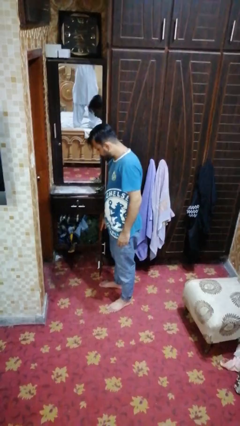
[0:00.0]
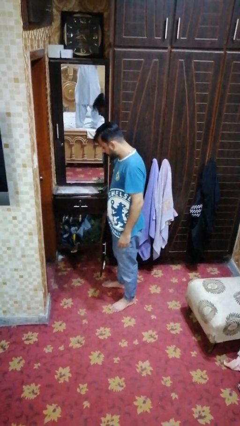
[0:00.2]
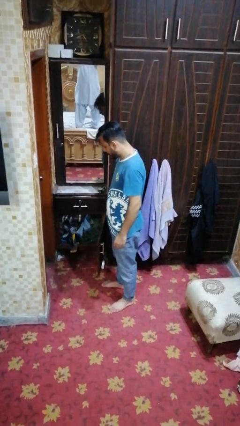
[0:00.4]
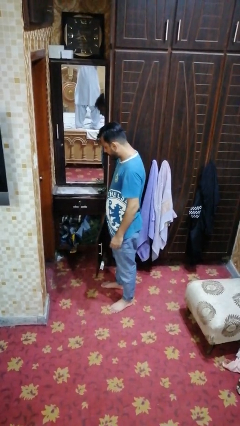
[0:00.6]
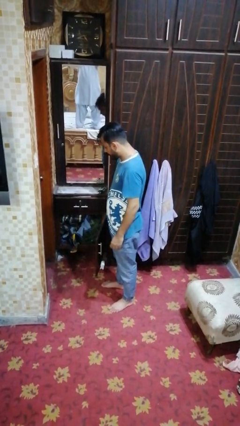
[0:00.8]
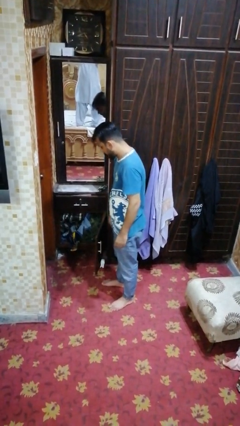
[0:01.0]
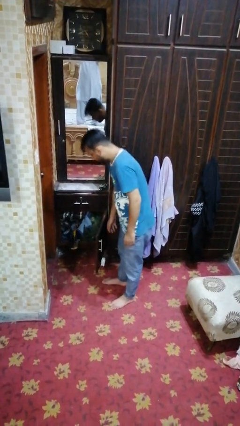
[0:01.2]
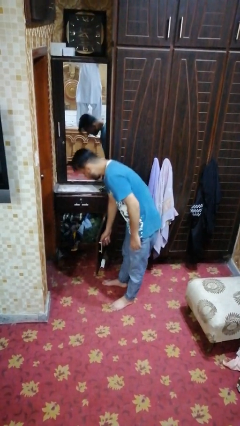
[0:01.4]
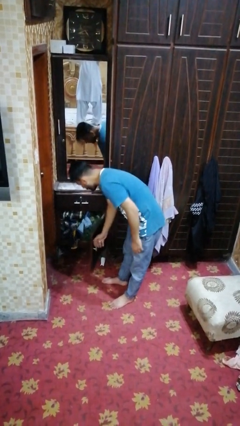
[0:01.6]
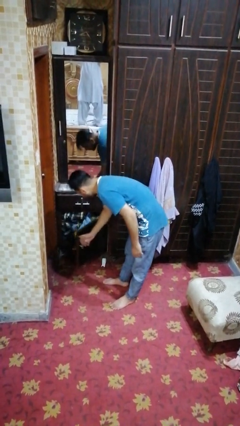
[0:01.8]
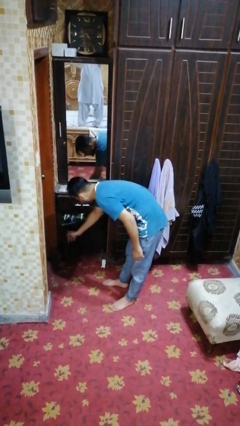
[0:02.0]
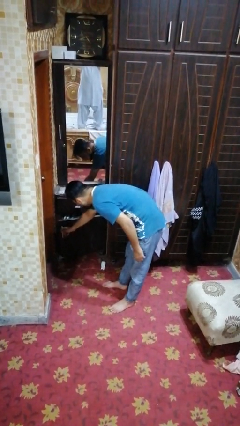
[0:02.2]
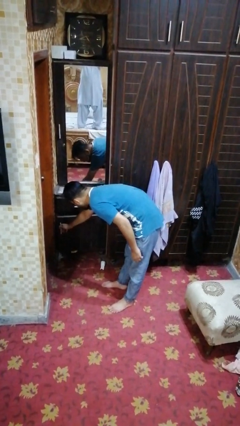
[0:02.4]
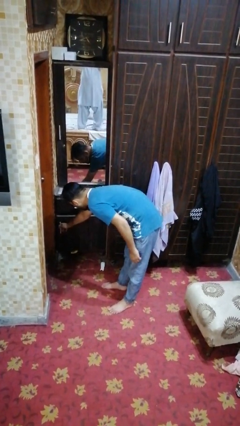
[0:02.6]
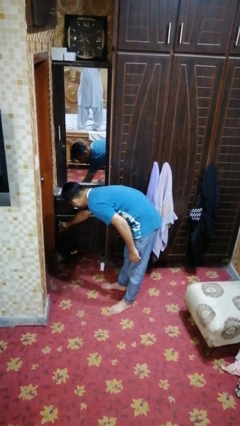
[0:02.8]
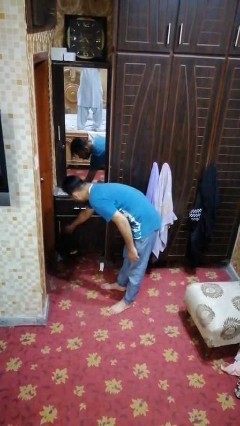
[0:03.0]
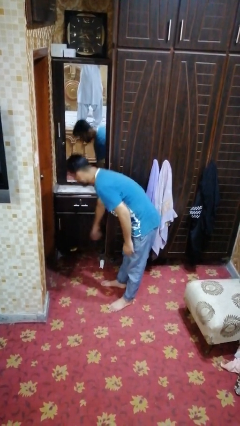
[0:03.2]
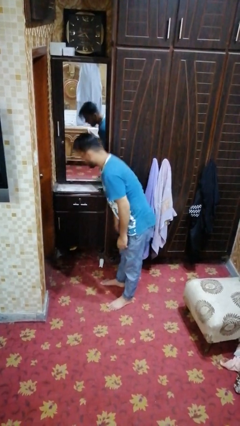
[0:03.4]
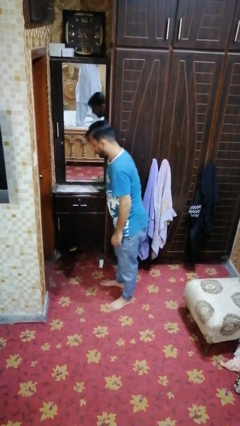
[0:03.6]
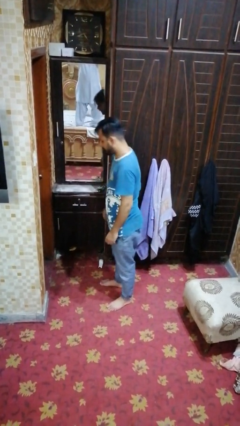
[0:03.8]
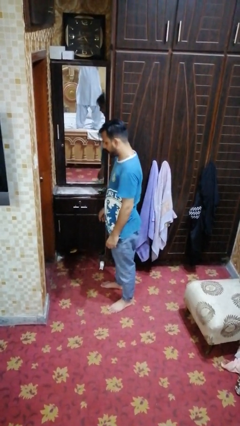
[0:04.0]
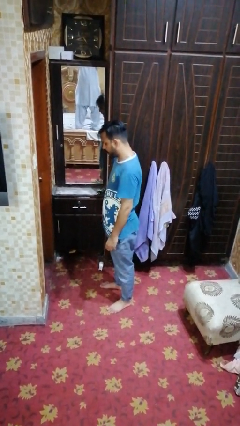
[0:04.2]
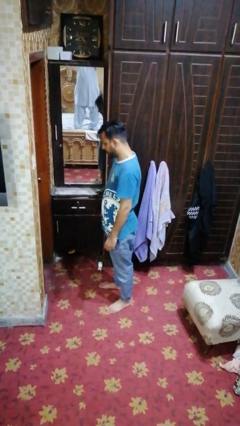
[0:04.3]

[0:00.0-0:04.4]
person closes dresser drawer

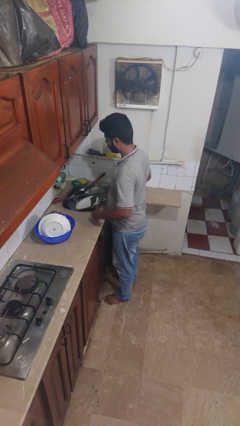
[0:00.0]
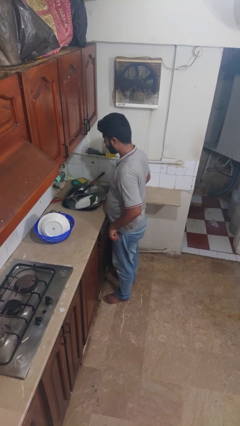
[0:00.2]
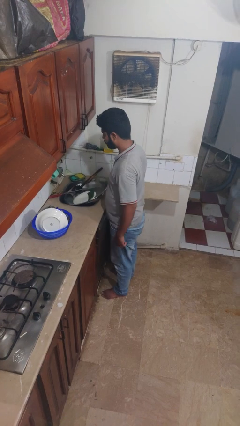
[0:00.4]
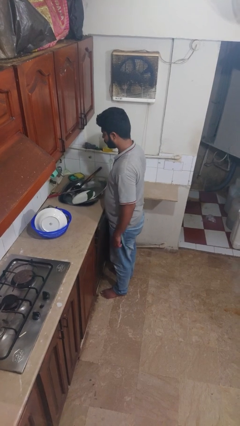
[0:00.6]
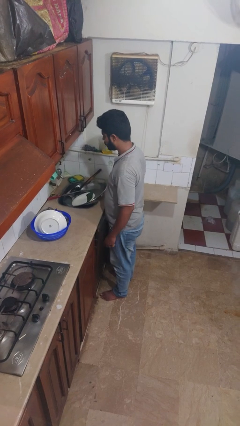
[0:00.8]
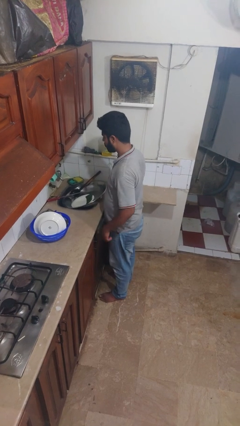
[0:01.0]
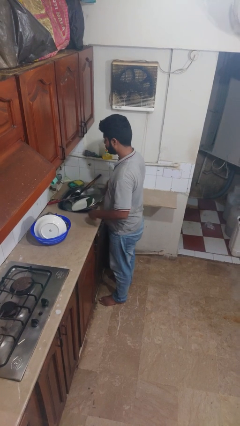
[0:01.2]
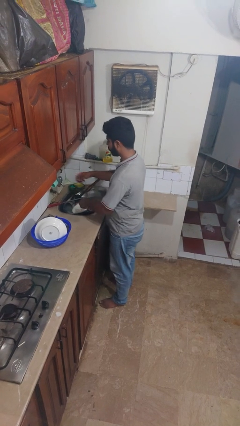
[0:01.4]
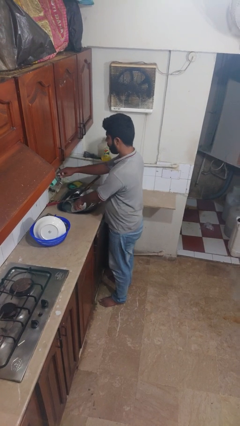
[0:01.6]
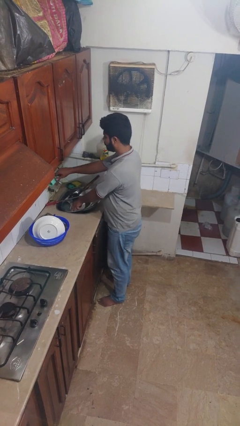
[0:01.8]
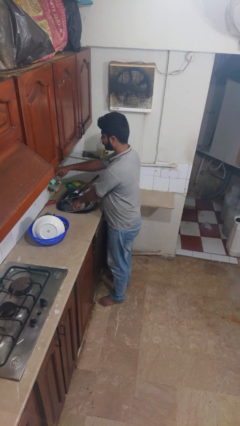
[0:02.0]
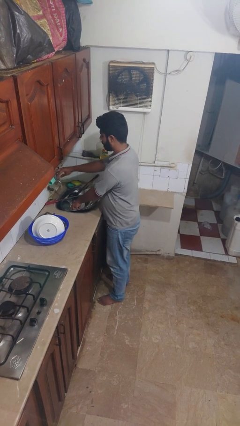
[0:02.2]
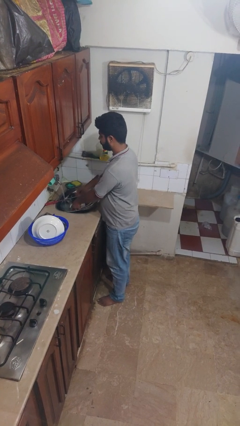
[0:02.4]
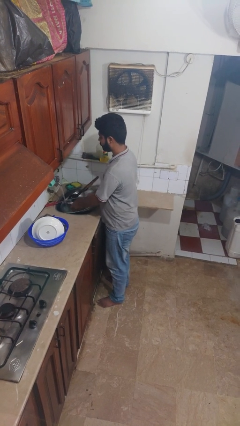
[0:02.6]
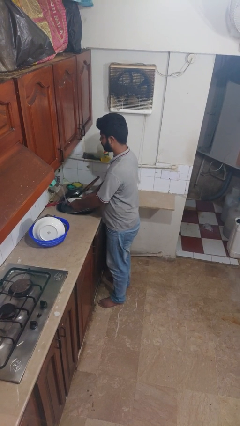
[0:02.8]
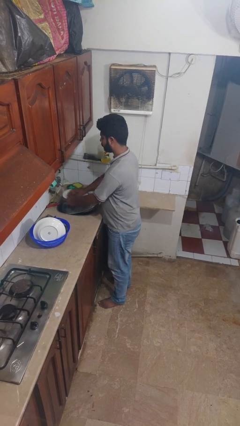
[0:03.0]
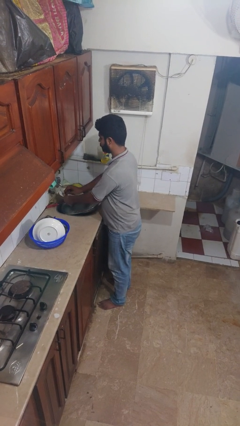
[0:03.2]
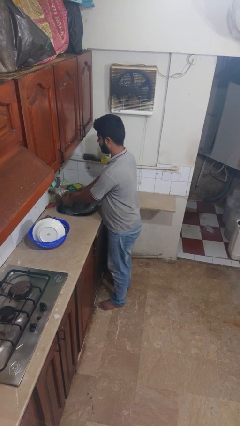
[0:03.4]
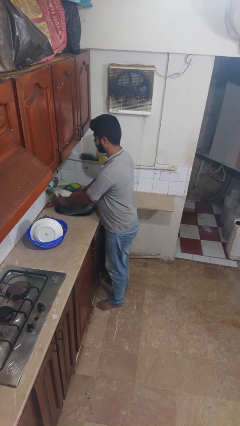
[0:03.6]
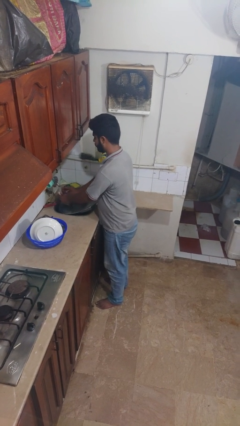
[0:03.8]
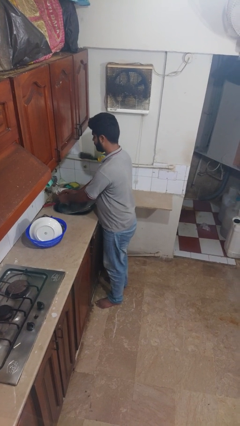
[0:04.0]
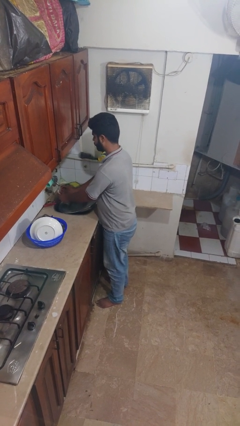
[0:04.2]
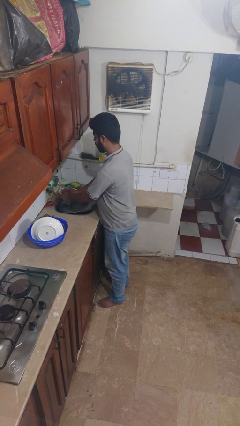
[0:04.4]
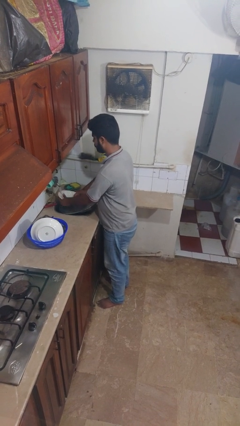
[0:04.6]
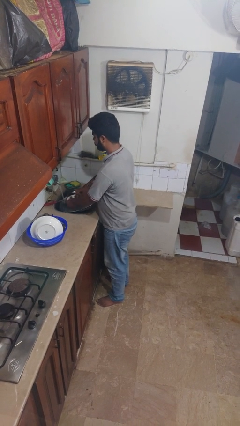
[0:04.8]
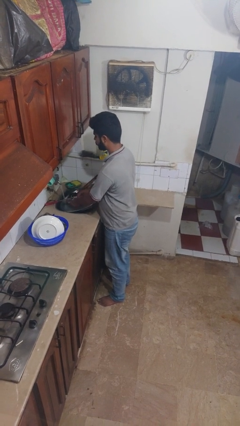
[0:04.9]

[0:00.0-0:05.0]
person washes dish

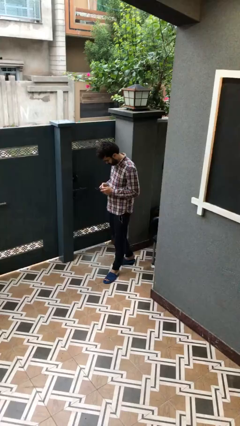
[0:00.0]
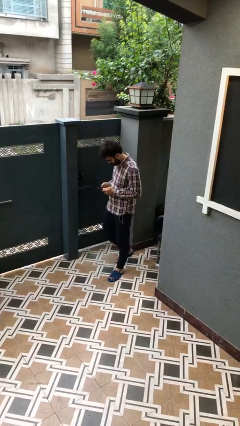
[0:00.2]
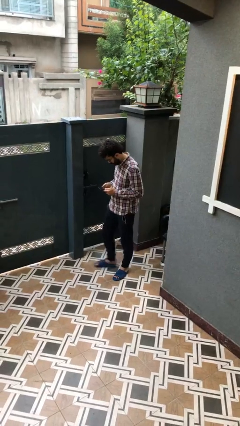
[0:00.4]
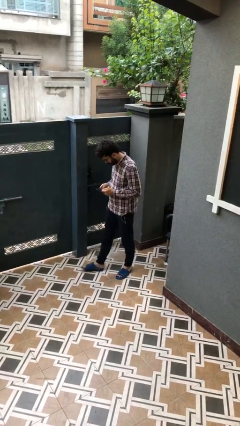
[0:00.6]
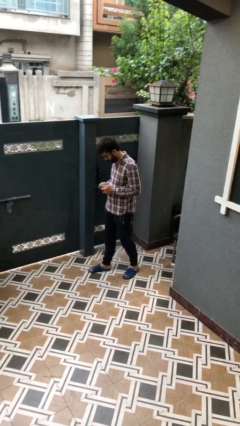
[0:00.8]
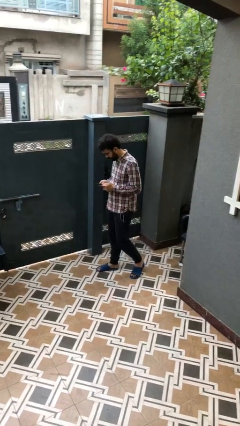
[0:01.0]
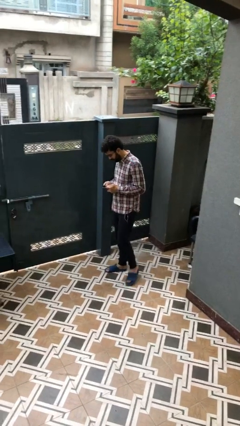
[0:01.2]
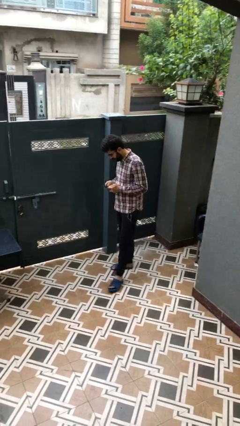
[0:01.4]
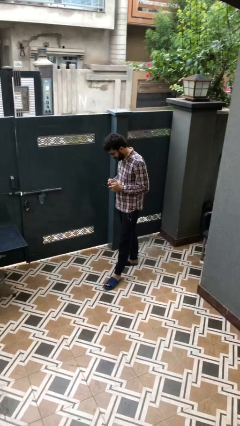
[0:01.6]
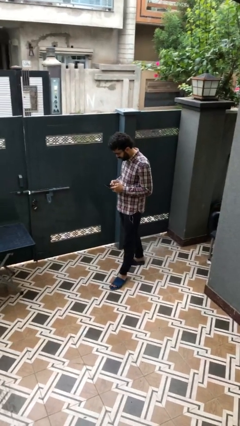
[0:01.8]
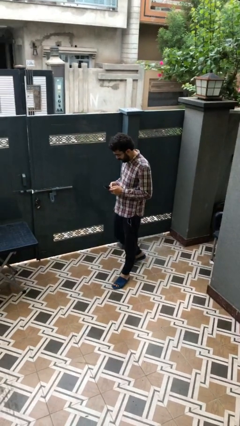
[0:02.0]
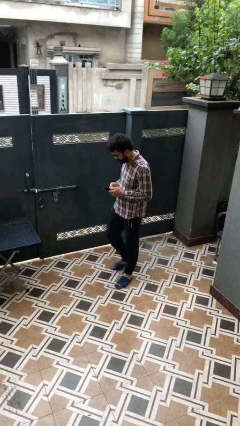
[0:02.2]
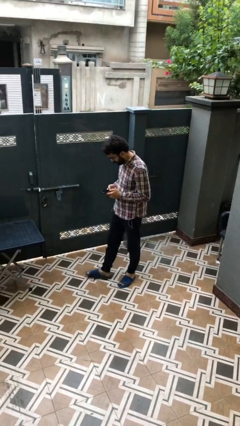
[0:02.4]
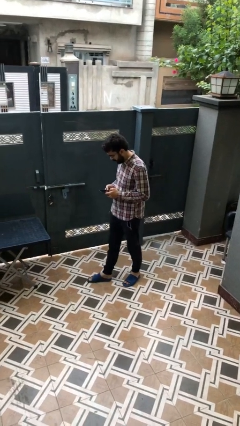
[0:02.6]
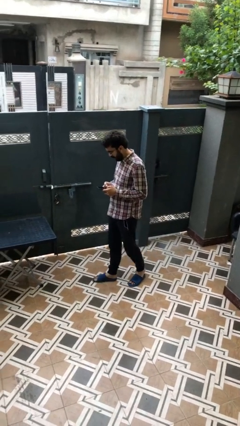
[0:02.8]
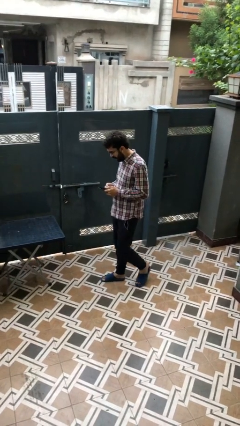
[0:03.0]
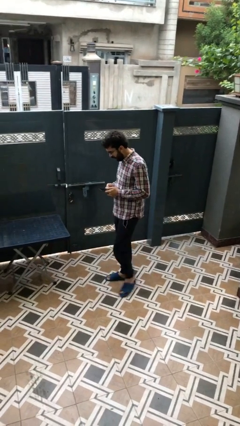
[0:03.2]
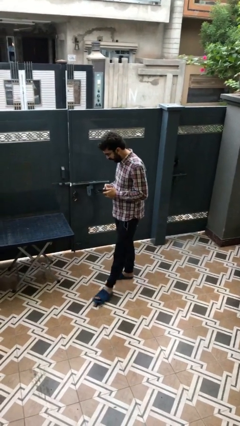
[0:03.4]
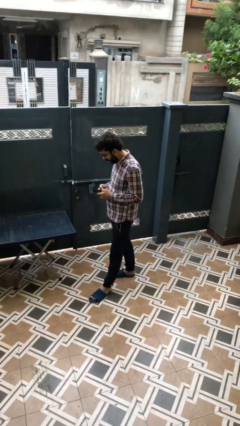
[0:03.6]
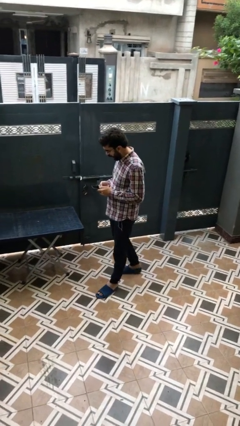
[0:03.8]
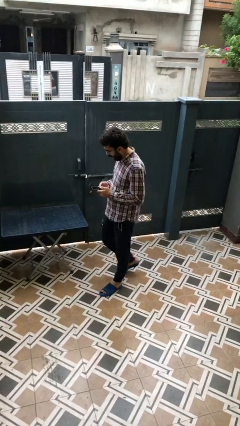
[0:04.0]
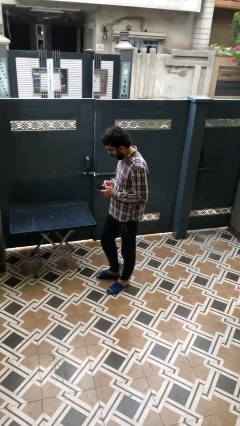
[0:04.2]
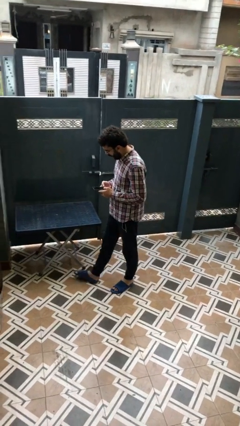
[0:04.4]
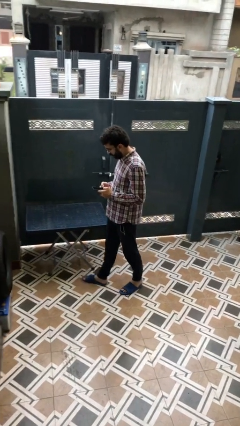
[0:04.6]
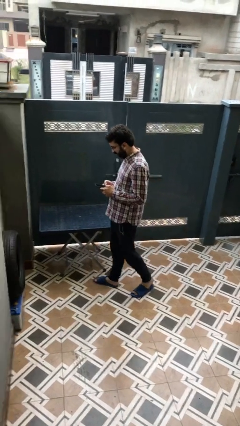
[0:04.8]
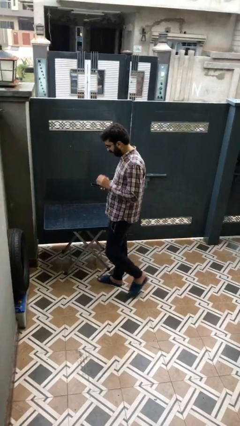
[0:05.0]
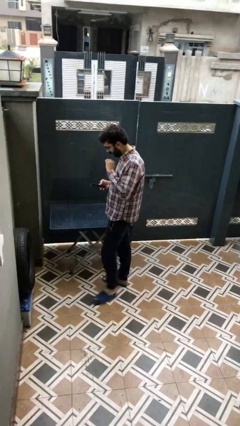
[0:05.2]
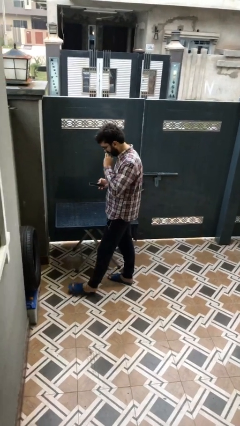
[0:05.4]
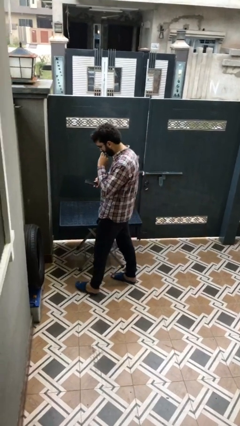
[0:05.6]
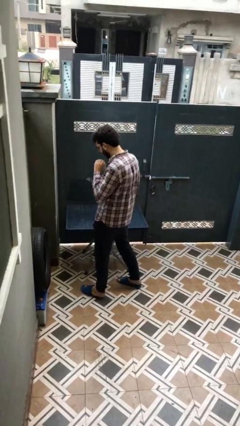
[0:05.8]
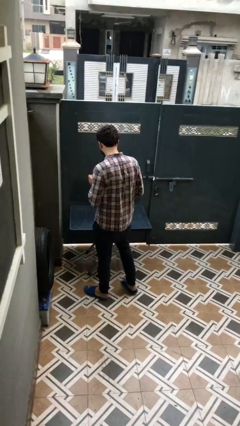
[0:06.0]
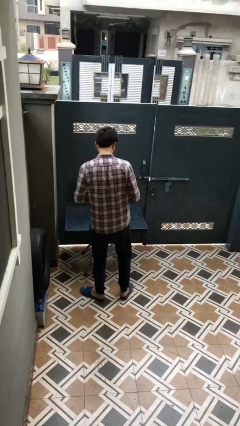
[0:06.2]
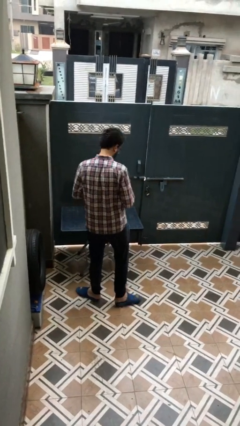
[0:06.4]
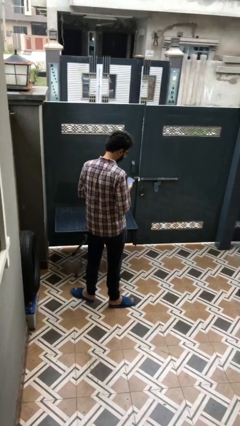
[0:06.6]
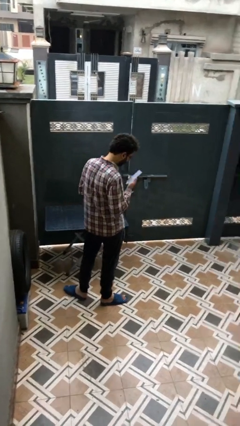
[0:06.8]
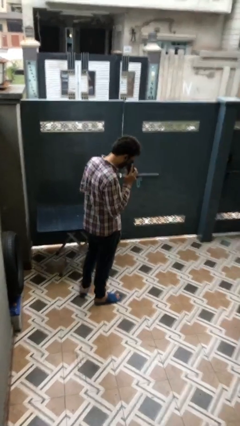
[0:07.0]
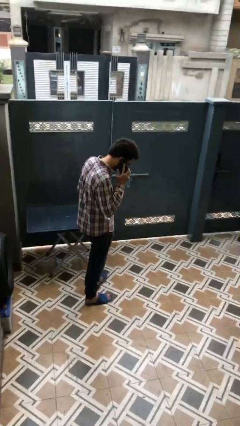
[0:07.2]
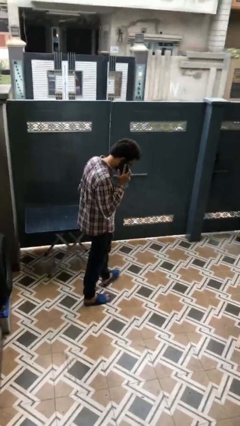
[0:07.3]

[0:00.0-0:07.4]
person texts on phone

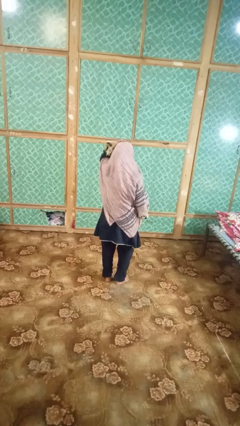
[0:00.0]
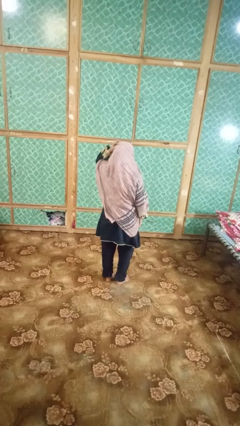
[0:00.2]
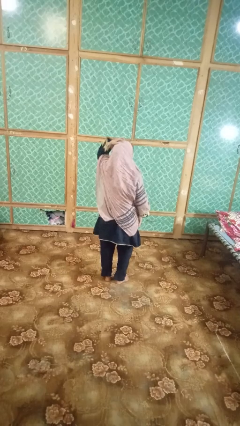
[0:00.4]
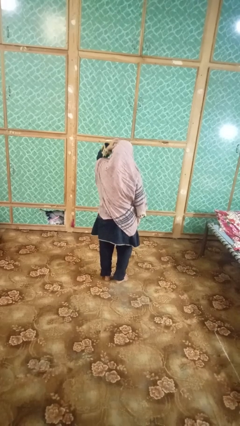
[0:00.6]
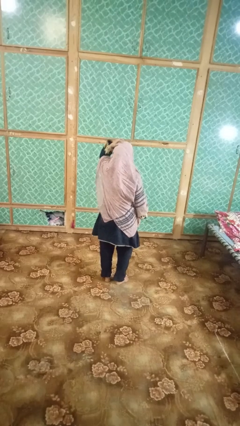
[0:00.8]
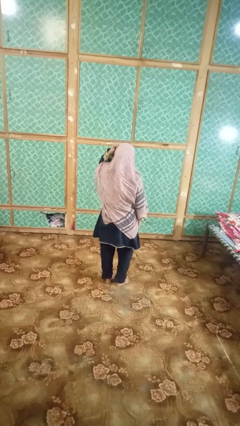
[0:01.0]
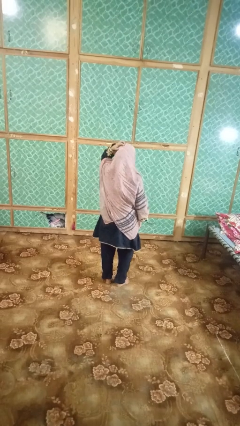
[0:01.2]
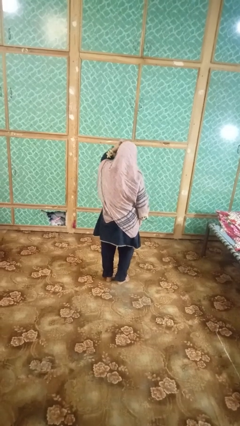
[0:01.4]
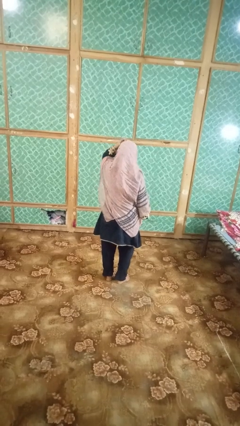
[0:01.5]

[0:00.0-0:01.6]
person strokes hair
